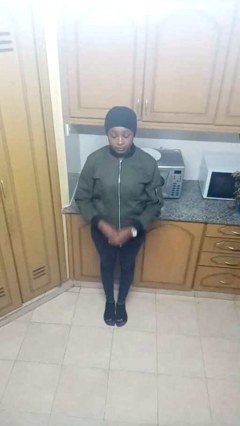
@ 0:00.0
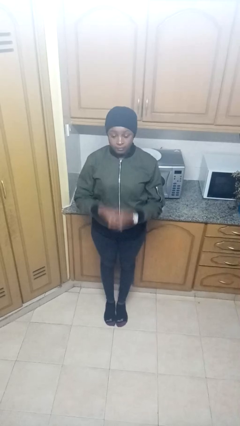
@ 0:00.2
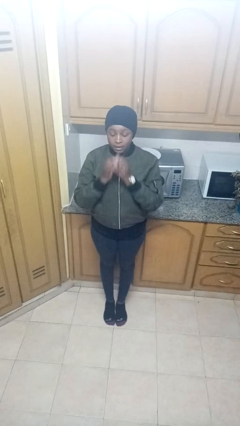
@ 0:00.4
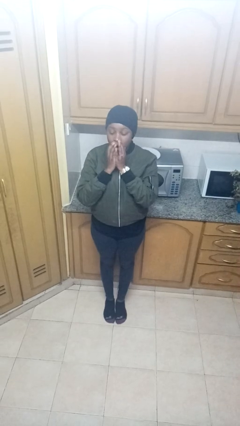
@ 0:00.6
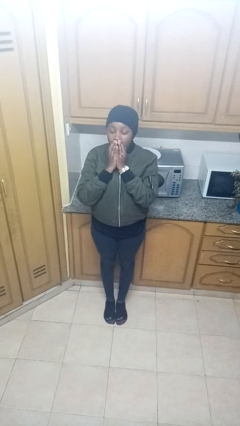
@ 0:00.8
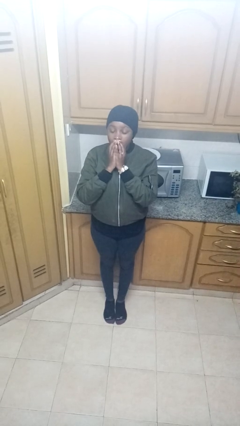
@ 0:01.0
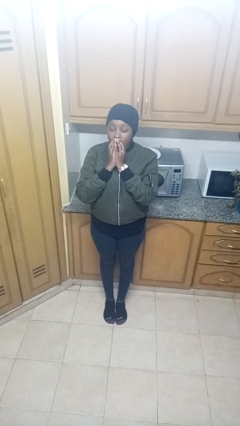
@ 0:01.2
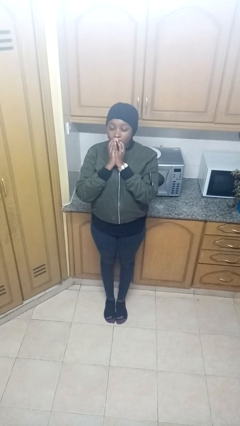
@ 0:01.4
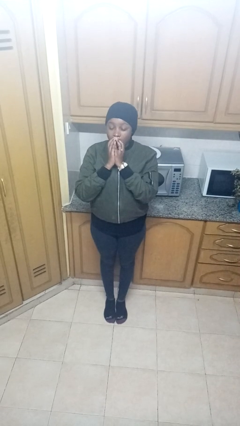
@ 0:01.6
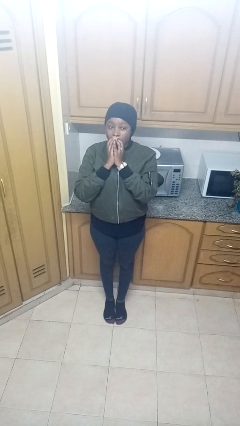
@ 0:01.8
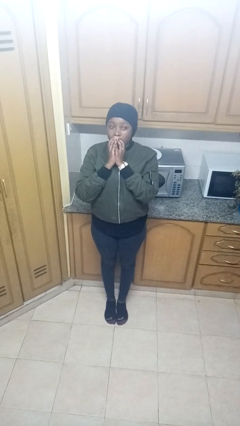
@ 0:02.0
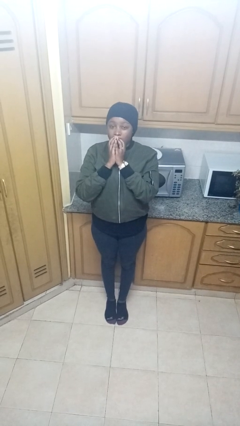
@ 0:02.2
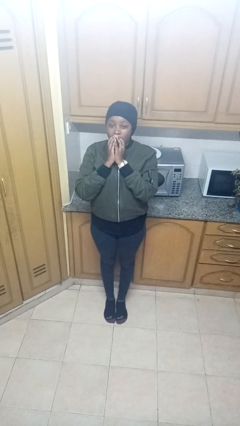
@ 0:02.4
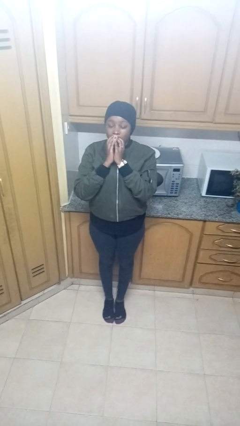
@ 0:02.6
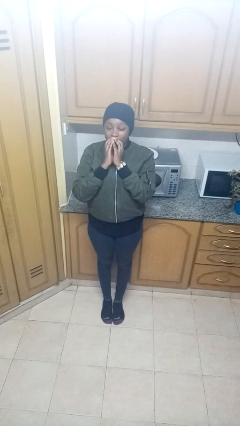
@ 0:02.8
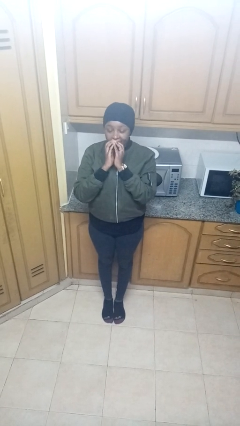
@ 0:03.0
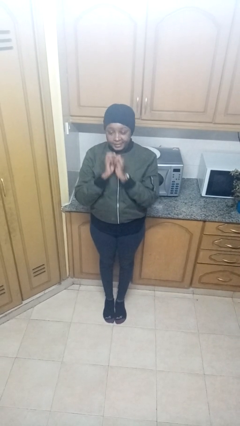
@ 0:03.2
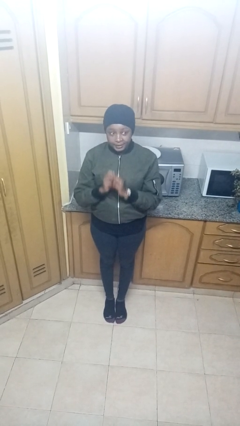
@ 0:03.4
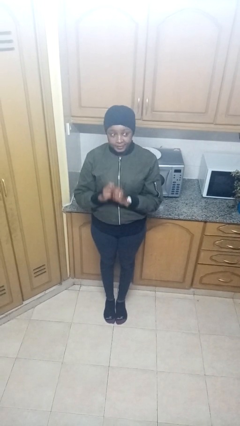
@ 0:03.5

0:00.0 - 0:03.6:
person yawns

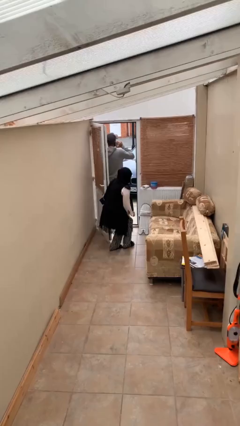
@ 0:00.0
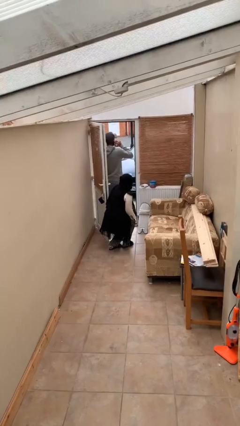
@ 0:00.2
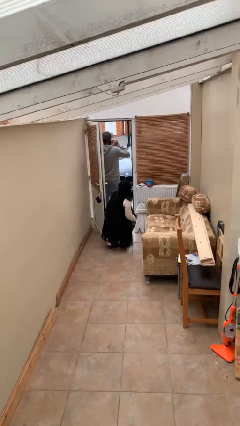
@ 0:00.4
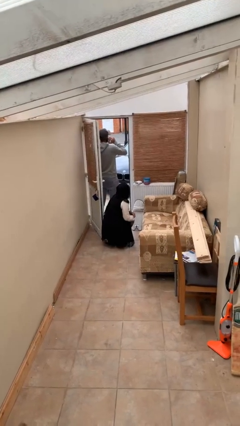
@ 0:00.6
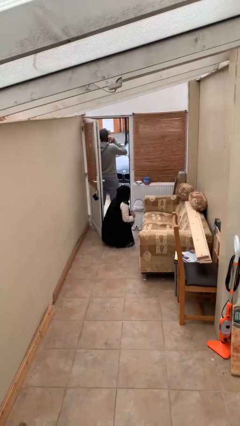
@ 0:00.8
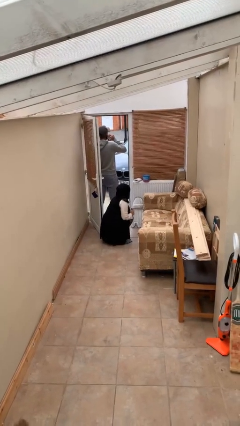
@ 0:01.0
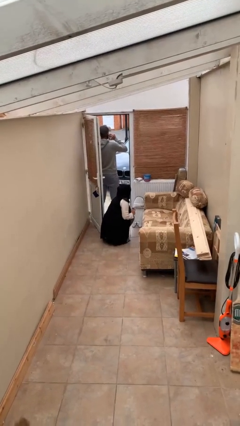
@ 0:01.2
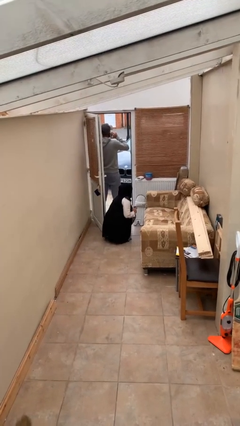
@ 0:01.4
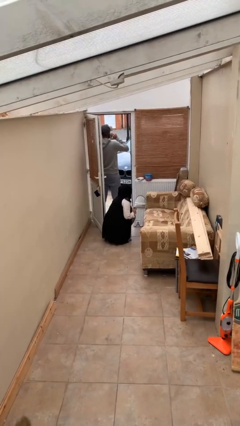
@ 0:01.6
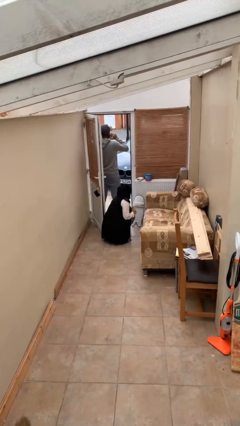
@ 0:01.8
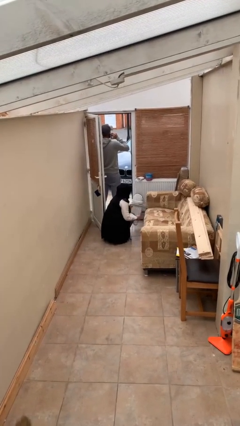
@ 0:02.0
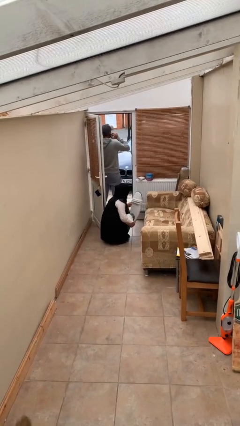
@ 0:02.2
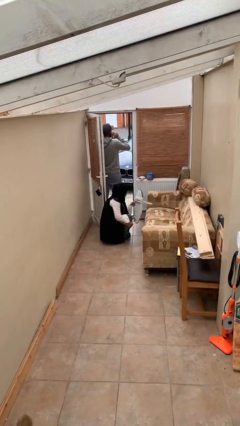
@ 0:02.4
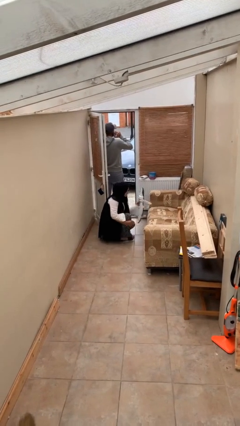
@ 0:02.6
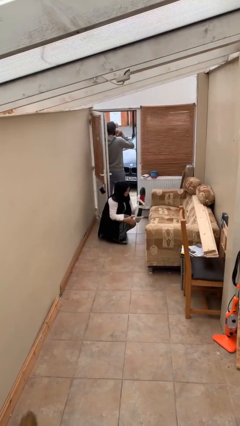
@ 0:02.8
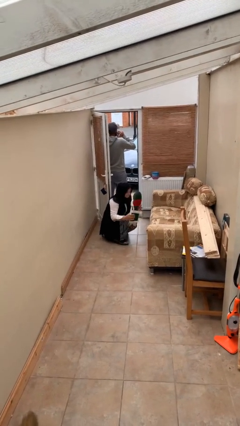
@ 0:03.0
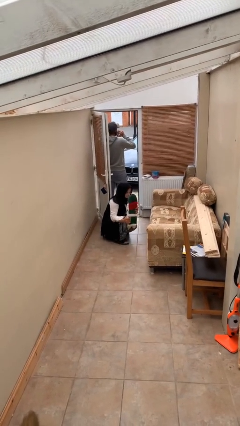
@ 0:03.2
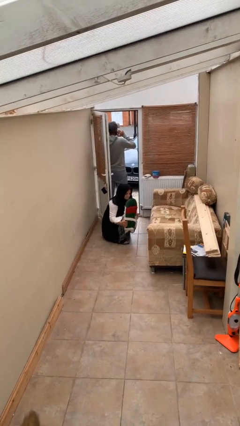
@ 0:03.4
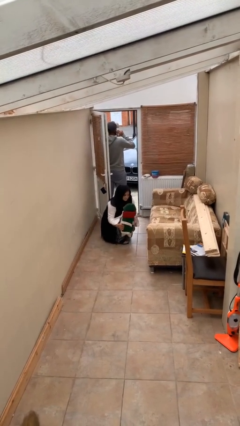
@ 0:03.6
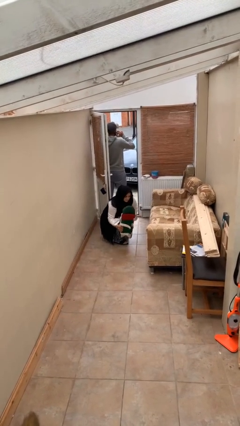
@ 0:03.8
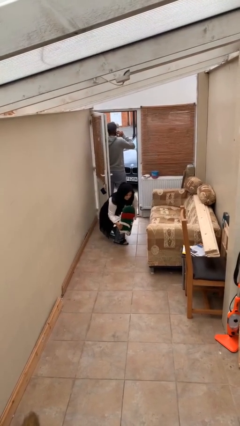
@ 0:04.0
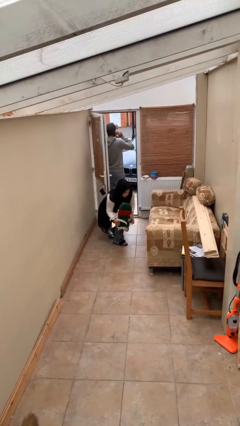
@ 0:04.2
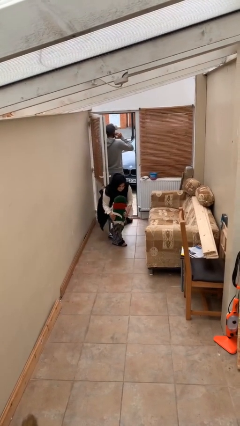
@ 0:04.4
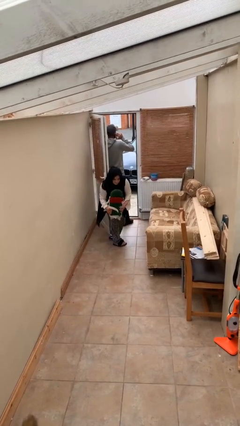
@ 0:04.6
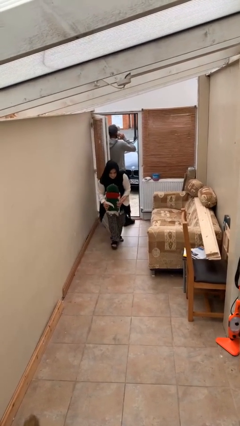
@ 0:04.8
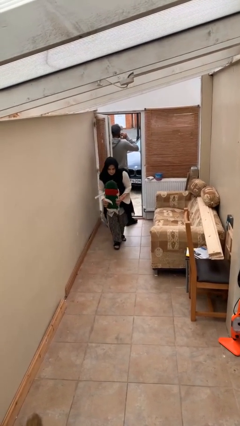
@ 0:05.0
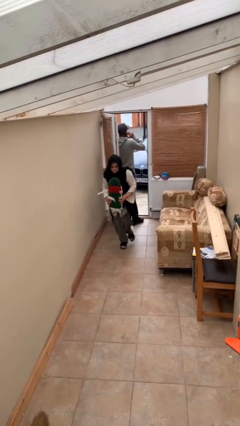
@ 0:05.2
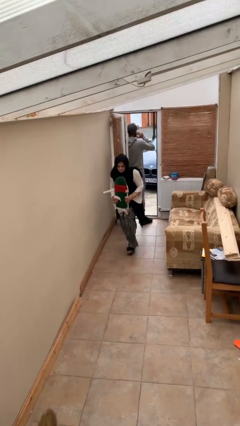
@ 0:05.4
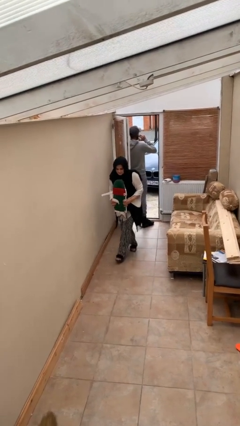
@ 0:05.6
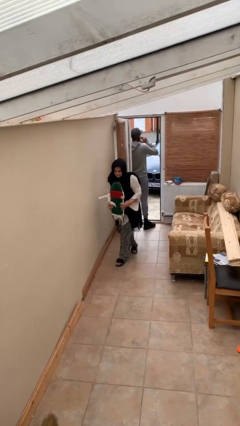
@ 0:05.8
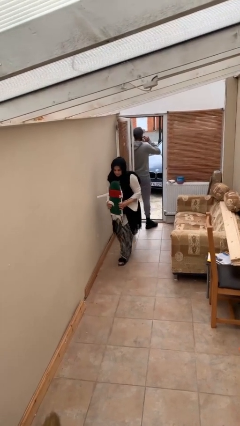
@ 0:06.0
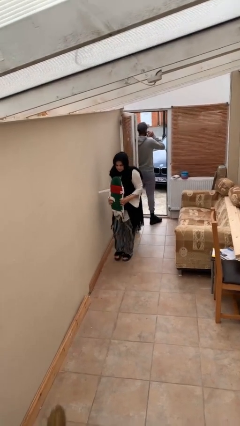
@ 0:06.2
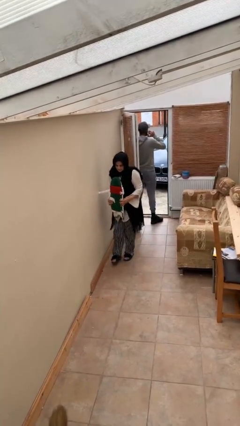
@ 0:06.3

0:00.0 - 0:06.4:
person steals object from person

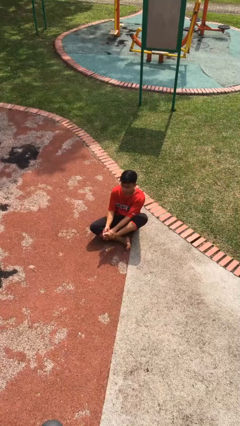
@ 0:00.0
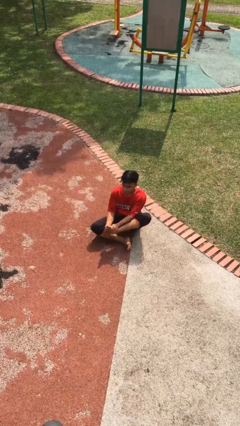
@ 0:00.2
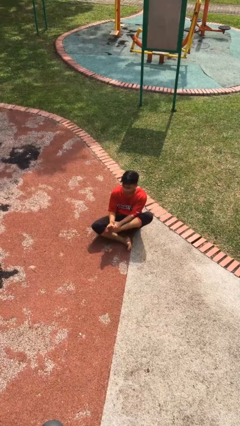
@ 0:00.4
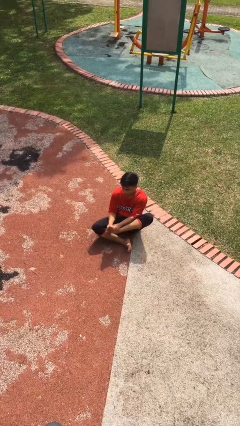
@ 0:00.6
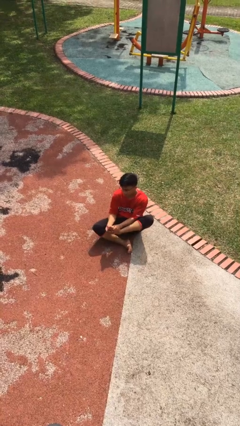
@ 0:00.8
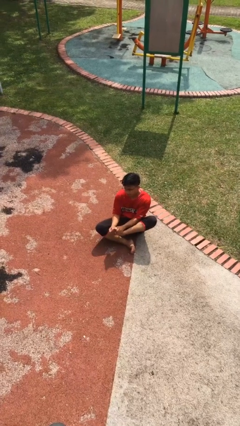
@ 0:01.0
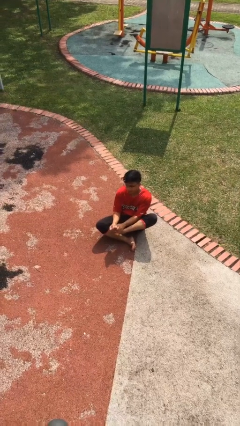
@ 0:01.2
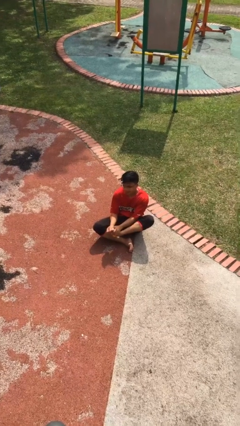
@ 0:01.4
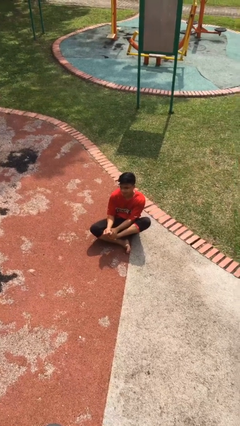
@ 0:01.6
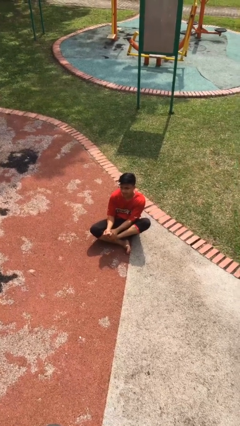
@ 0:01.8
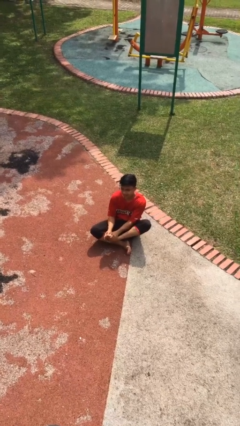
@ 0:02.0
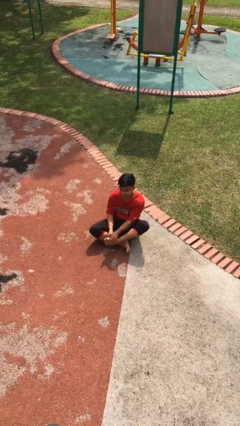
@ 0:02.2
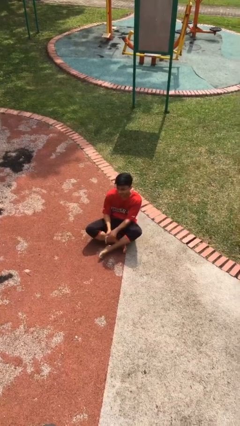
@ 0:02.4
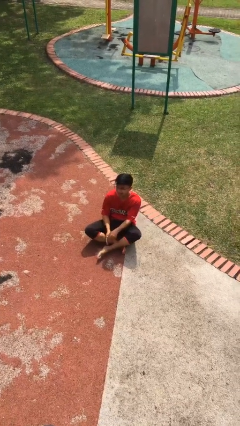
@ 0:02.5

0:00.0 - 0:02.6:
person rubs foot

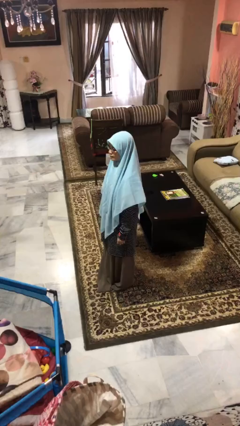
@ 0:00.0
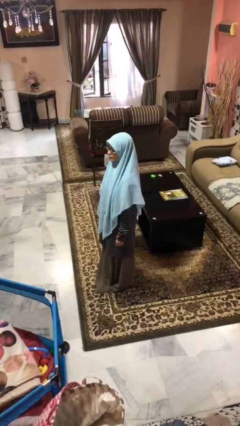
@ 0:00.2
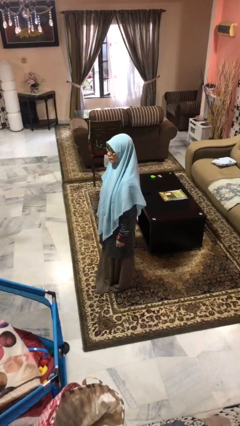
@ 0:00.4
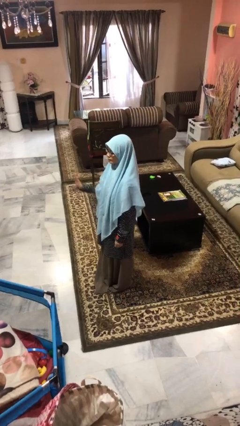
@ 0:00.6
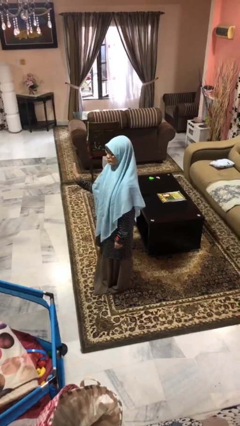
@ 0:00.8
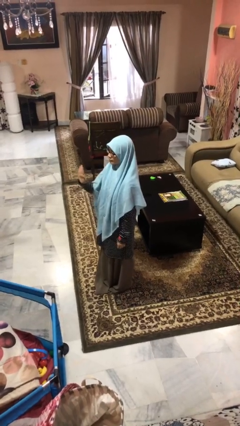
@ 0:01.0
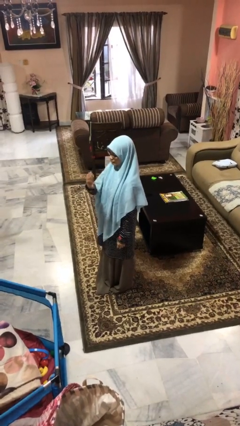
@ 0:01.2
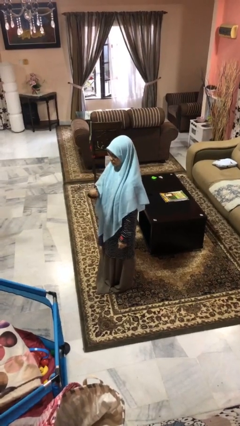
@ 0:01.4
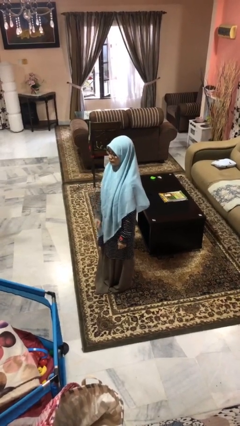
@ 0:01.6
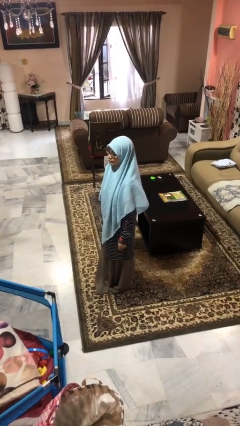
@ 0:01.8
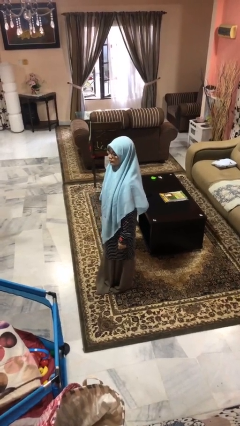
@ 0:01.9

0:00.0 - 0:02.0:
person gestures swipe left

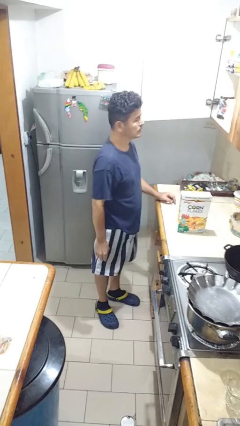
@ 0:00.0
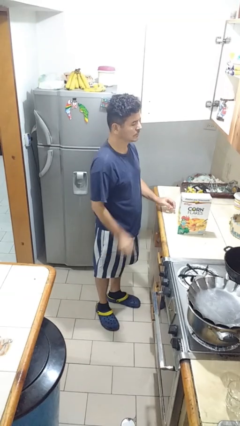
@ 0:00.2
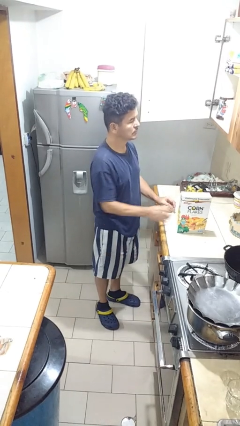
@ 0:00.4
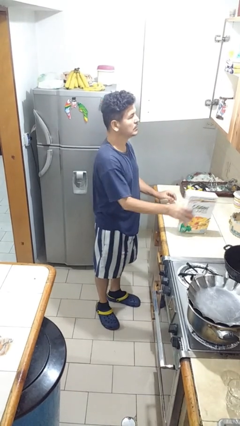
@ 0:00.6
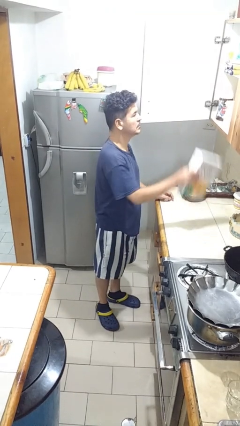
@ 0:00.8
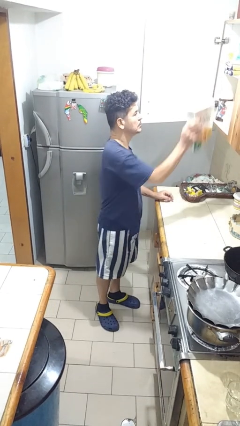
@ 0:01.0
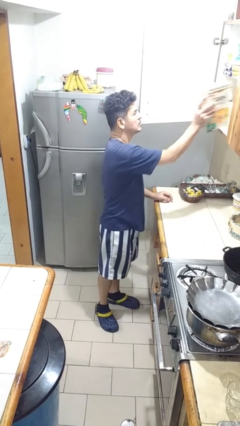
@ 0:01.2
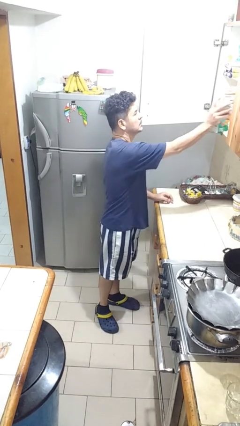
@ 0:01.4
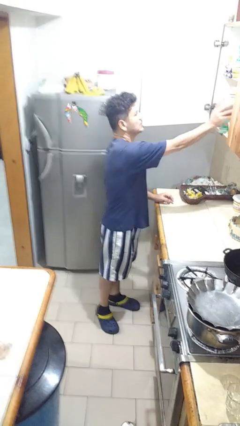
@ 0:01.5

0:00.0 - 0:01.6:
person puts object in cabinet

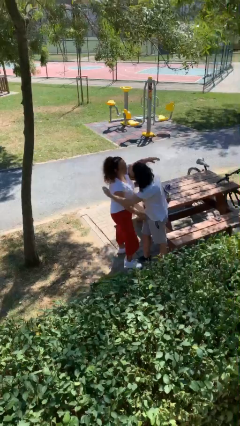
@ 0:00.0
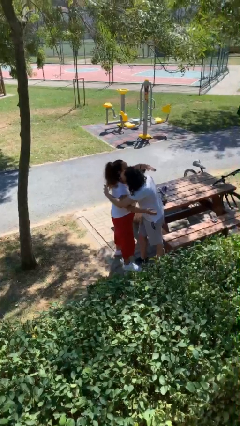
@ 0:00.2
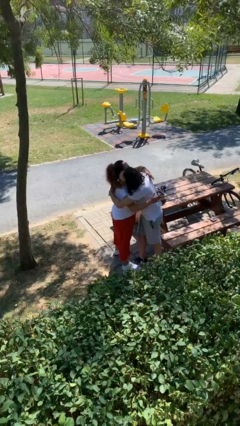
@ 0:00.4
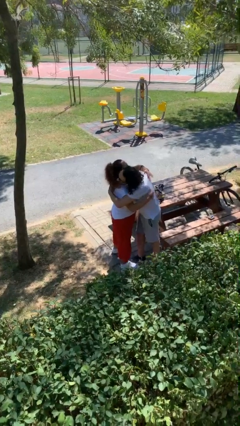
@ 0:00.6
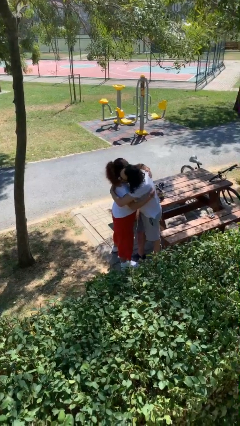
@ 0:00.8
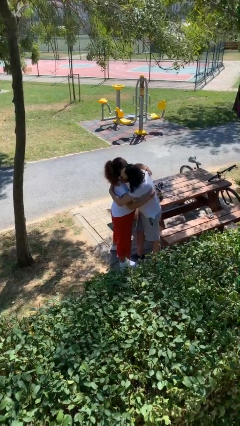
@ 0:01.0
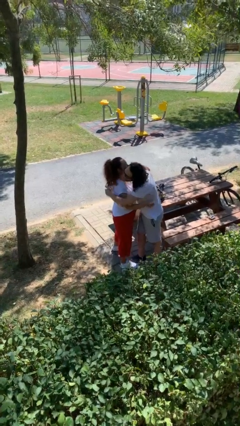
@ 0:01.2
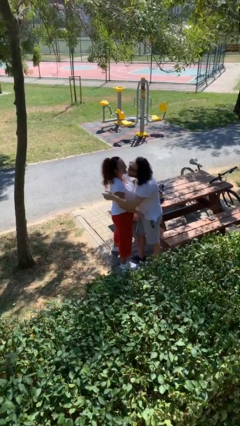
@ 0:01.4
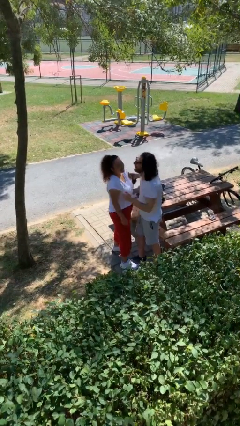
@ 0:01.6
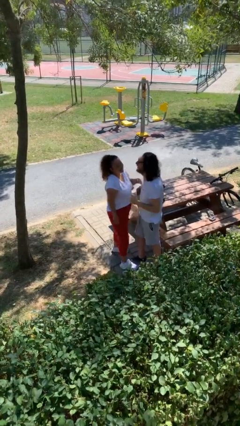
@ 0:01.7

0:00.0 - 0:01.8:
person embraces person
